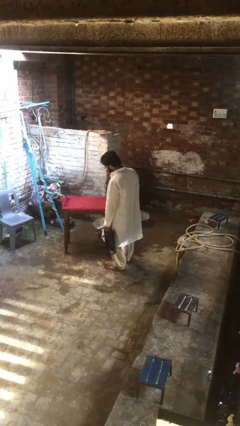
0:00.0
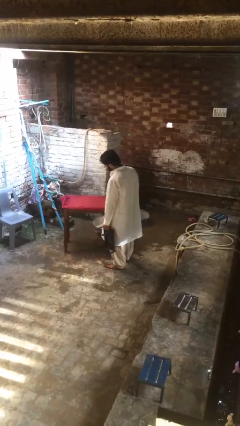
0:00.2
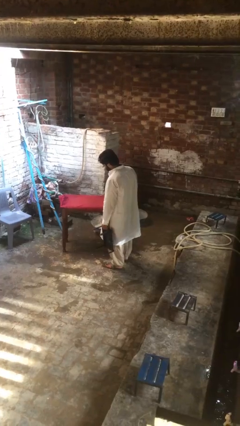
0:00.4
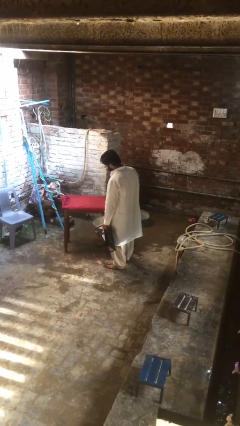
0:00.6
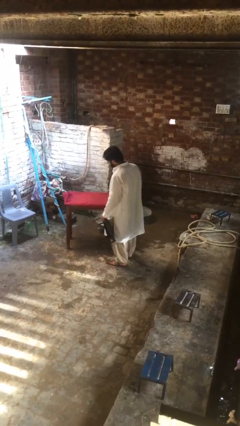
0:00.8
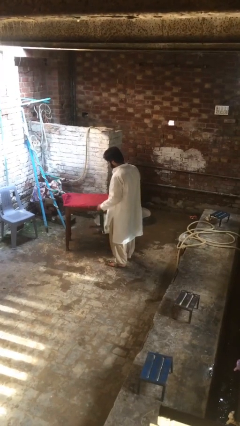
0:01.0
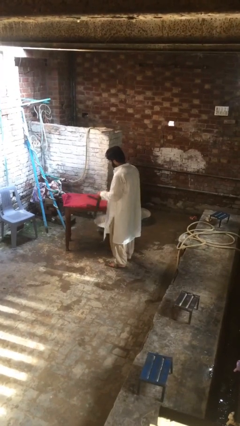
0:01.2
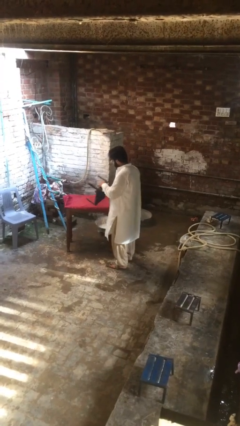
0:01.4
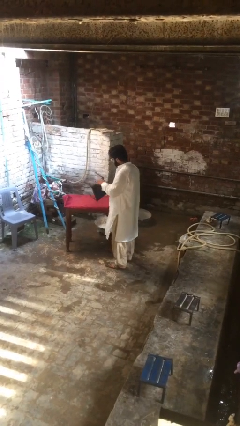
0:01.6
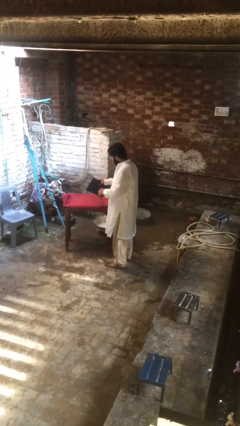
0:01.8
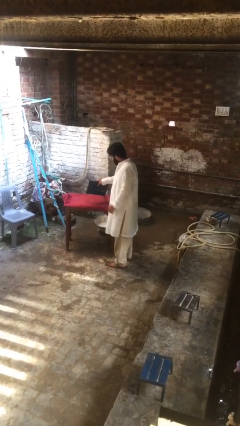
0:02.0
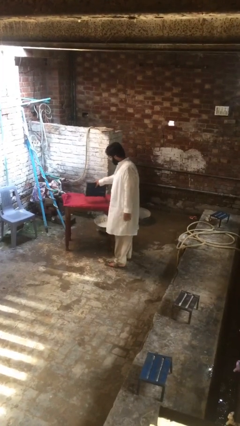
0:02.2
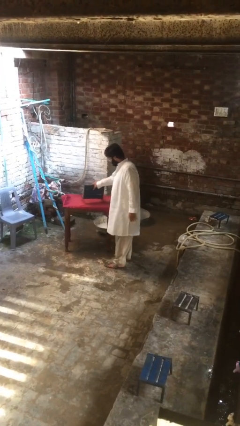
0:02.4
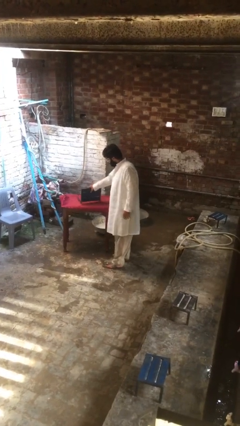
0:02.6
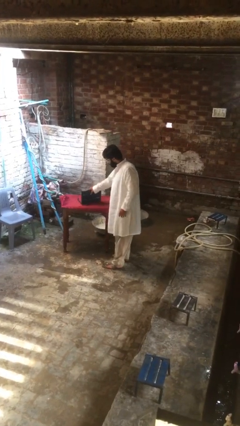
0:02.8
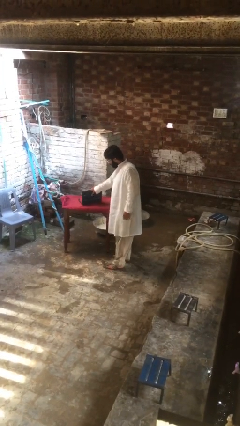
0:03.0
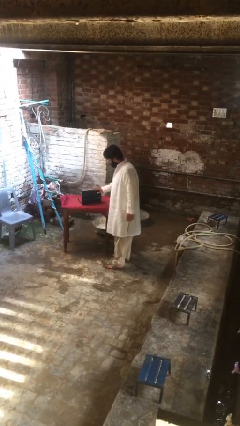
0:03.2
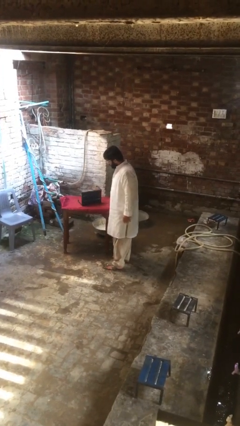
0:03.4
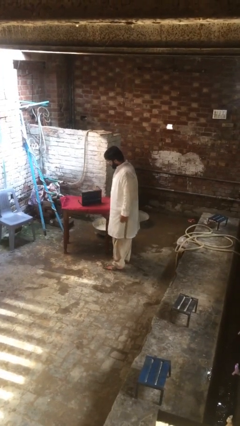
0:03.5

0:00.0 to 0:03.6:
person puts down object on table

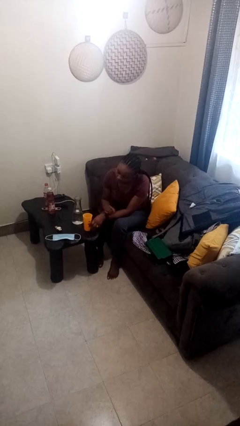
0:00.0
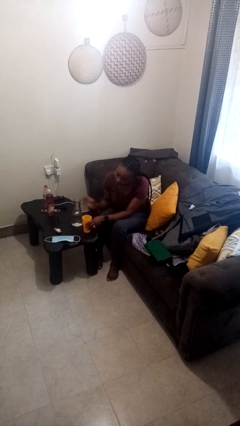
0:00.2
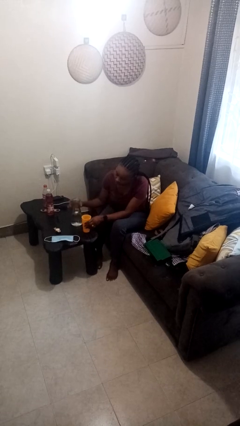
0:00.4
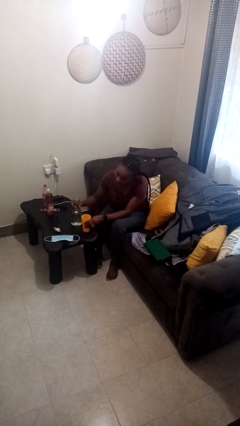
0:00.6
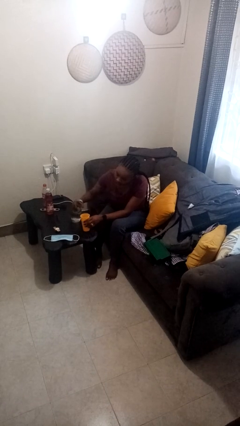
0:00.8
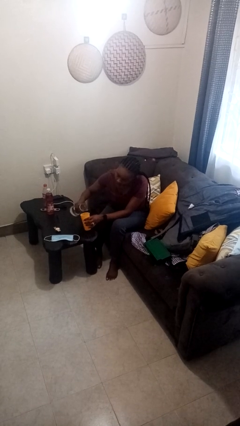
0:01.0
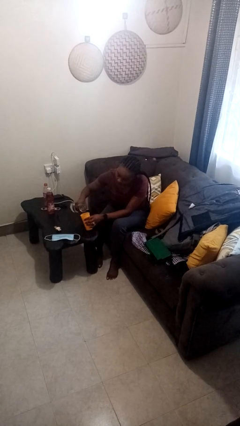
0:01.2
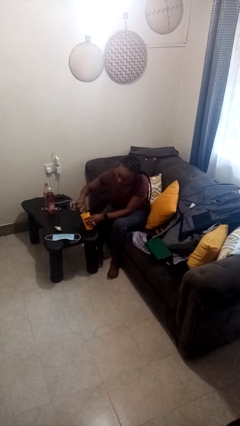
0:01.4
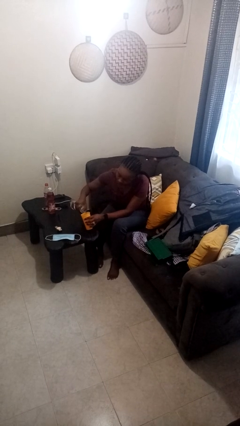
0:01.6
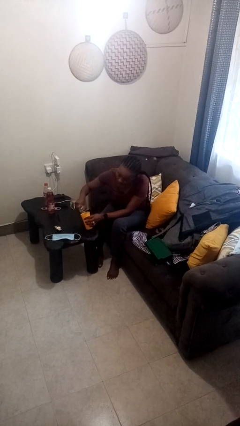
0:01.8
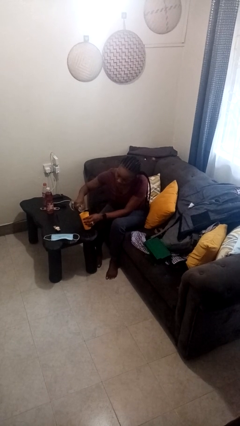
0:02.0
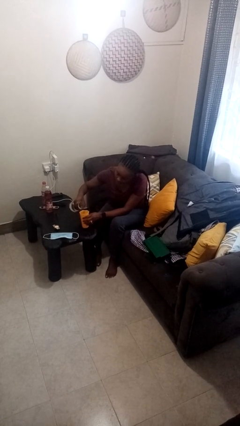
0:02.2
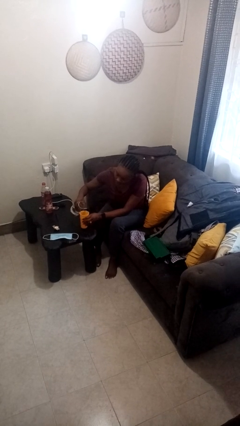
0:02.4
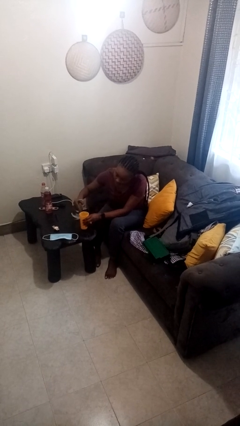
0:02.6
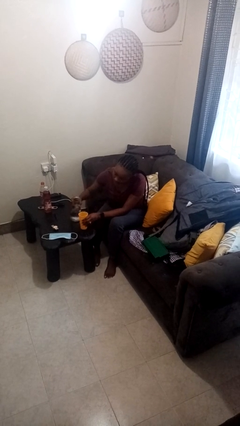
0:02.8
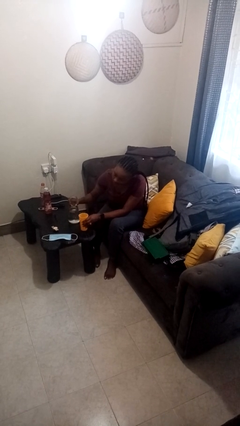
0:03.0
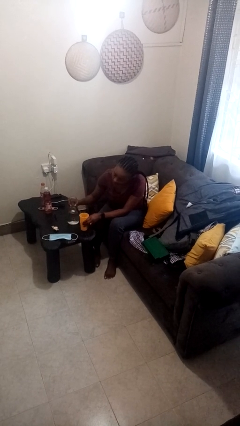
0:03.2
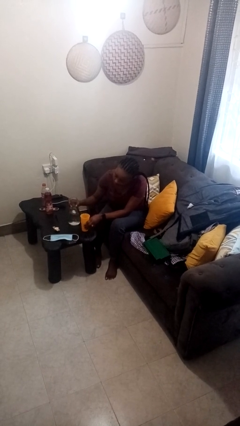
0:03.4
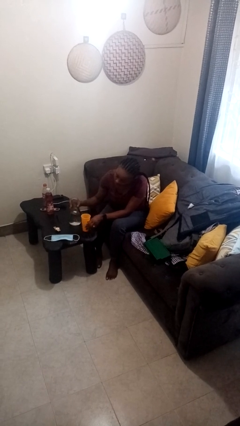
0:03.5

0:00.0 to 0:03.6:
person pours liquid into cup

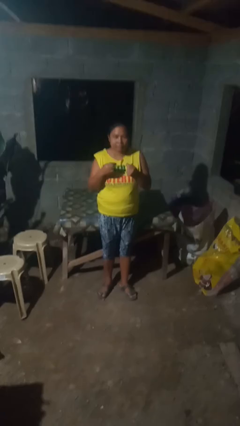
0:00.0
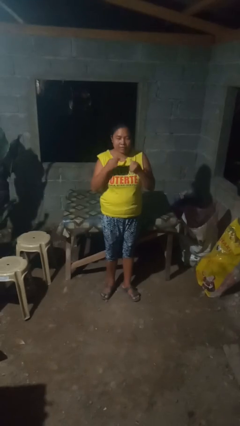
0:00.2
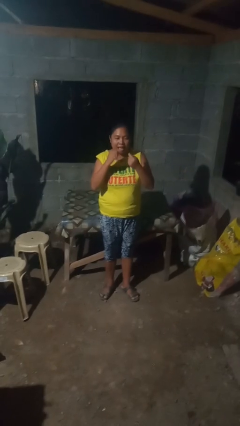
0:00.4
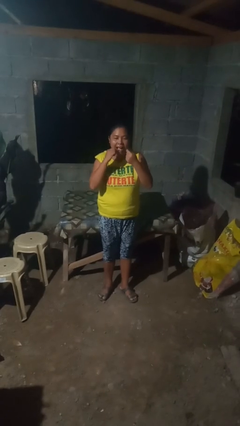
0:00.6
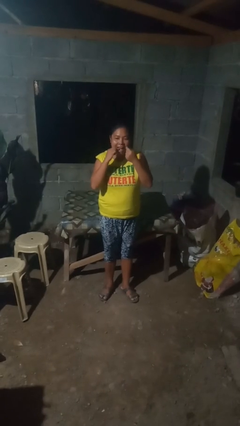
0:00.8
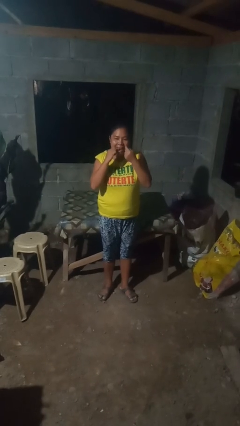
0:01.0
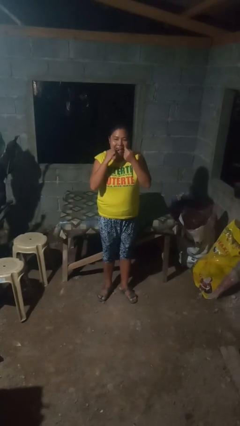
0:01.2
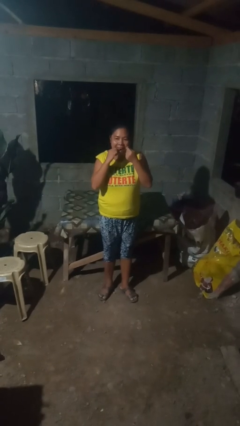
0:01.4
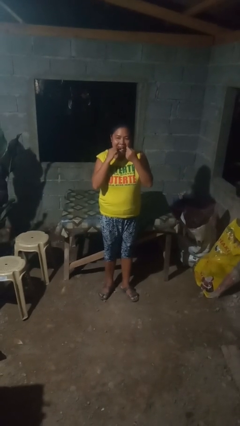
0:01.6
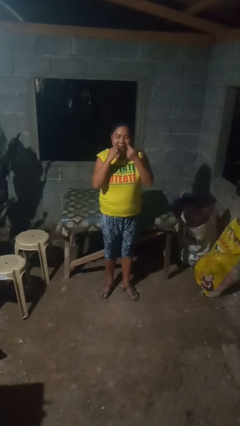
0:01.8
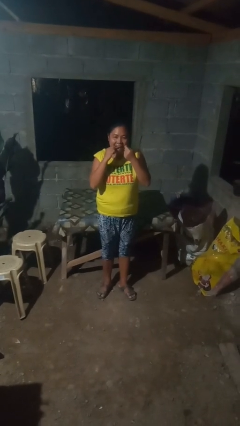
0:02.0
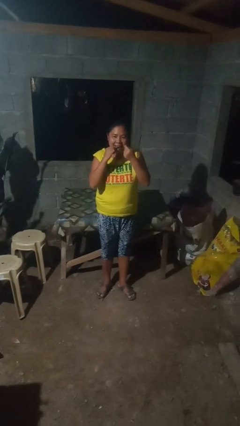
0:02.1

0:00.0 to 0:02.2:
person flosses

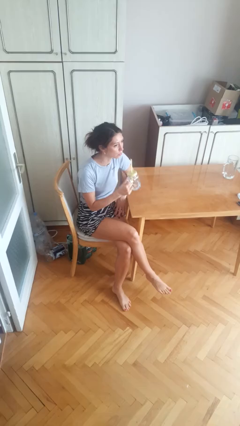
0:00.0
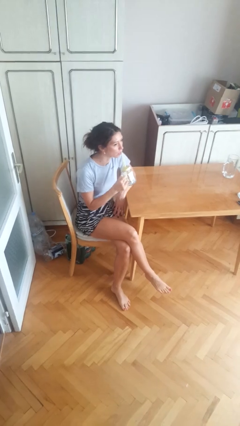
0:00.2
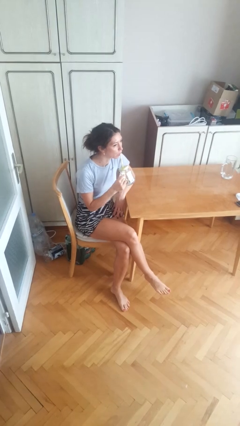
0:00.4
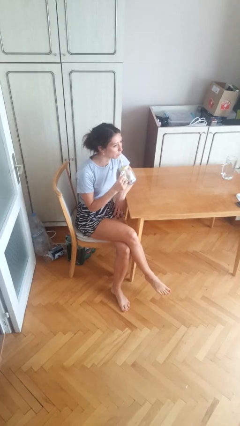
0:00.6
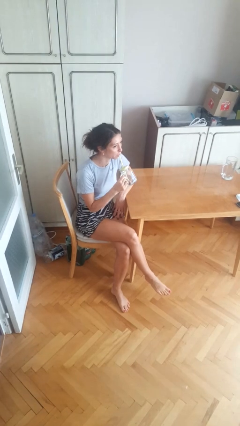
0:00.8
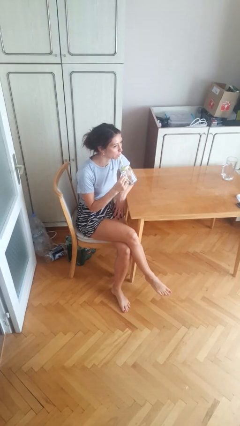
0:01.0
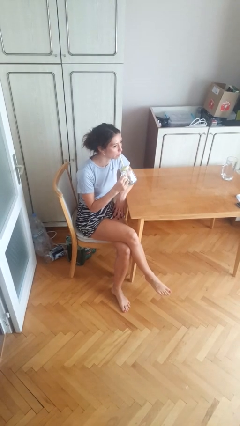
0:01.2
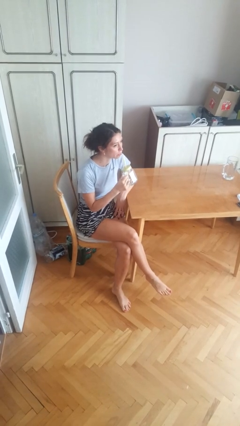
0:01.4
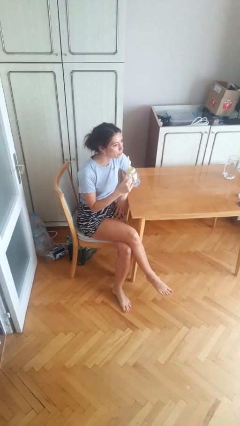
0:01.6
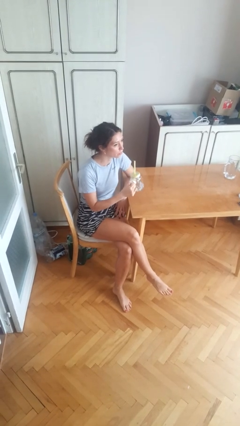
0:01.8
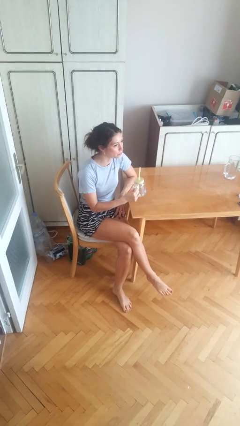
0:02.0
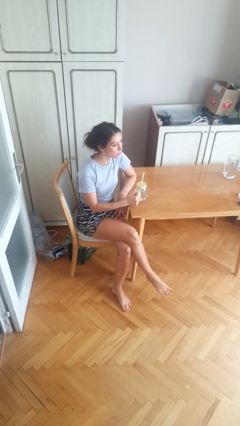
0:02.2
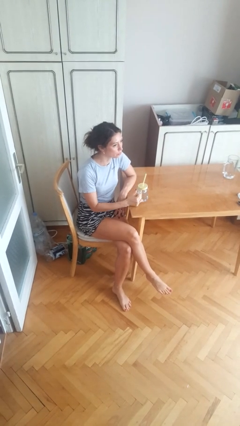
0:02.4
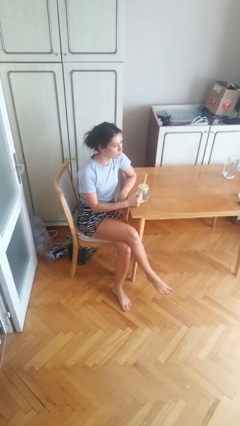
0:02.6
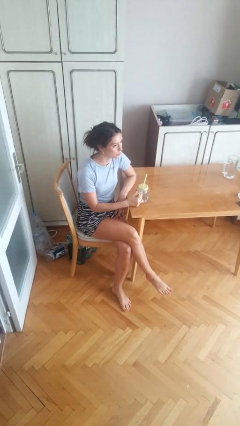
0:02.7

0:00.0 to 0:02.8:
person drinks from straw

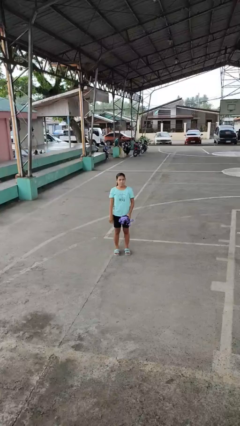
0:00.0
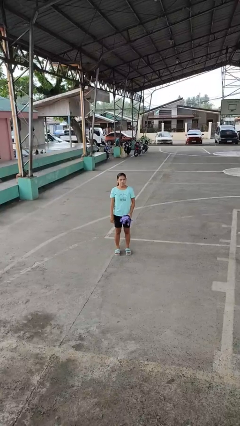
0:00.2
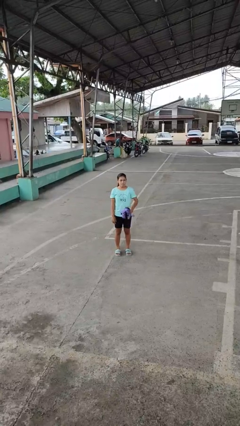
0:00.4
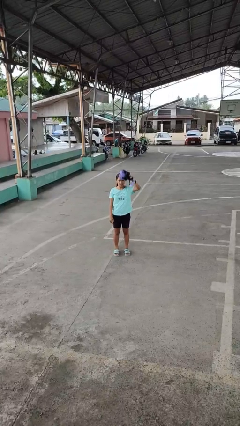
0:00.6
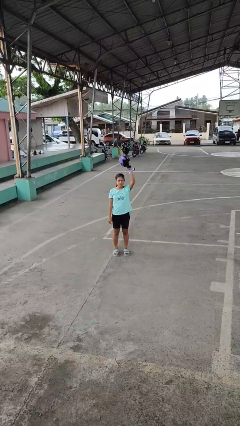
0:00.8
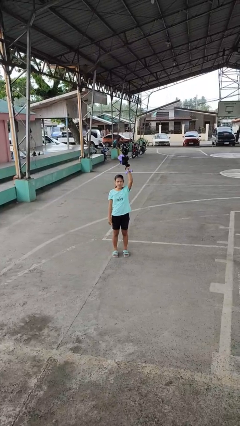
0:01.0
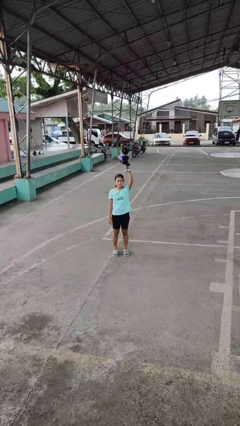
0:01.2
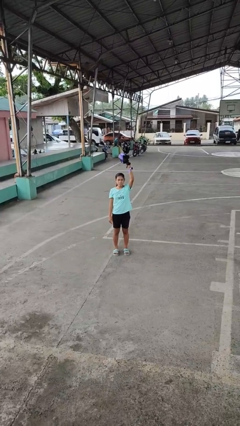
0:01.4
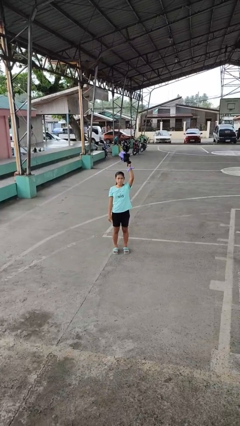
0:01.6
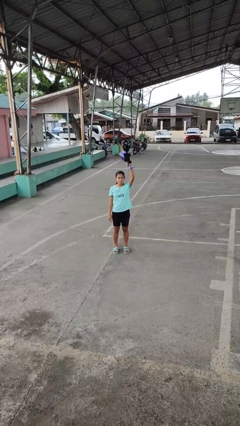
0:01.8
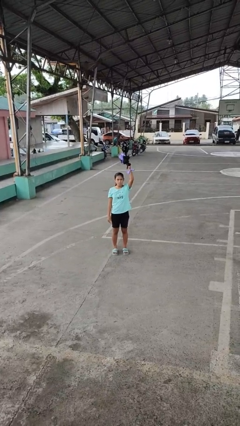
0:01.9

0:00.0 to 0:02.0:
person holds object above head

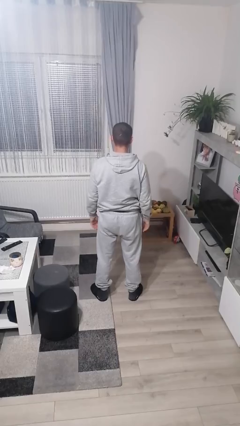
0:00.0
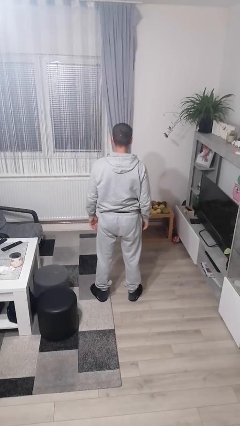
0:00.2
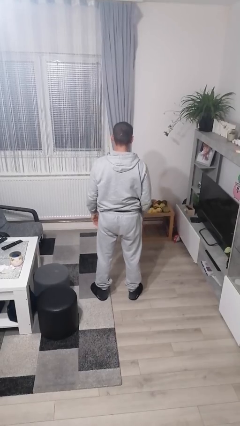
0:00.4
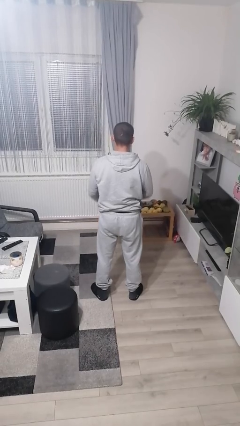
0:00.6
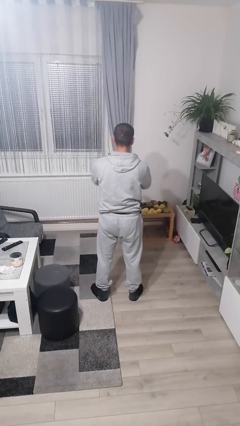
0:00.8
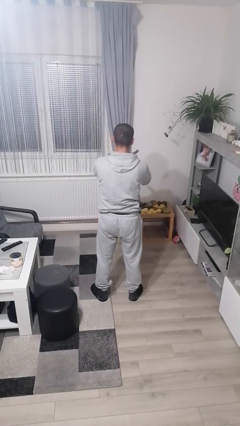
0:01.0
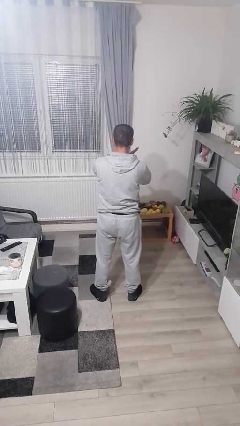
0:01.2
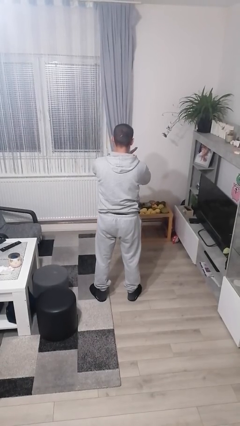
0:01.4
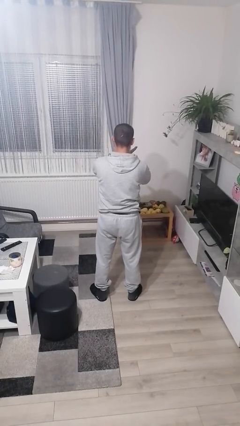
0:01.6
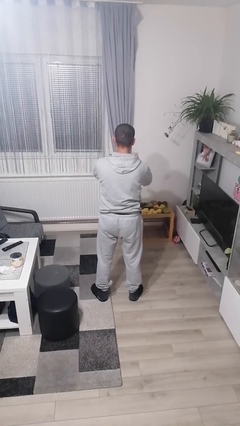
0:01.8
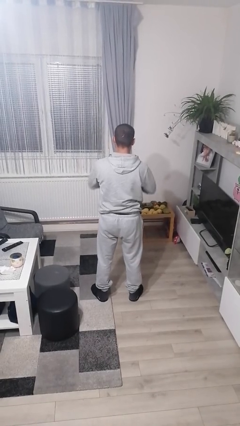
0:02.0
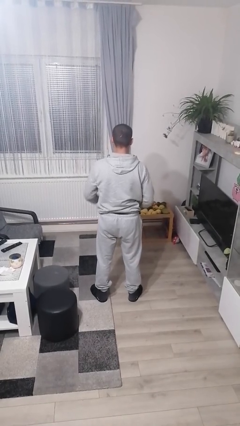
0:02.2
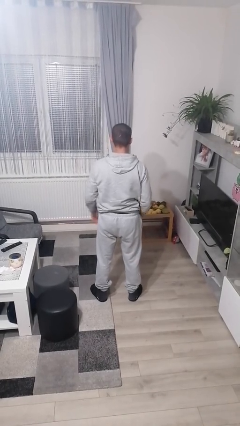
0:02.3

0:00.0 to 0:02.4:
person gestures arms x

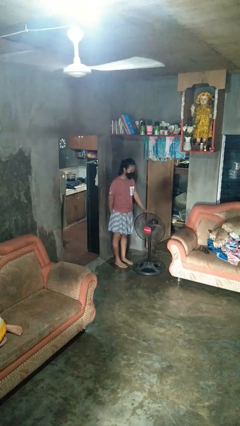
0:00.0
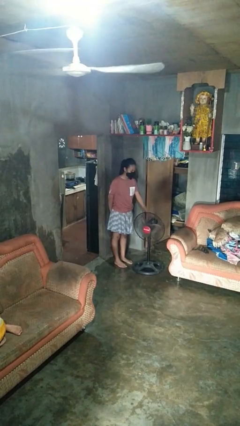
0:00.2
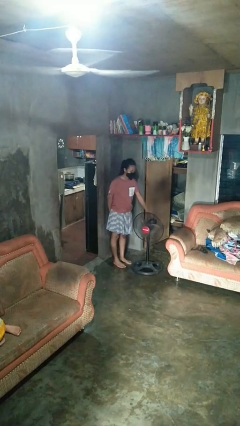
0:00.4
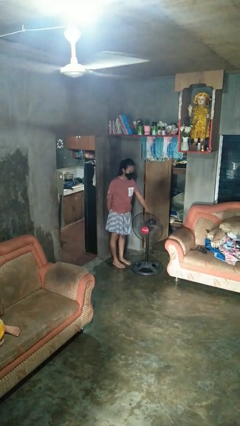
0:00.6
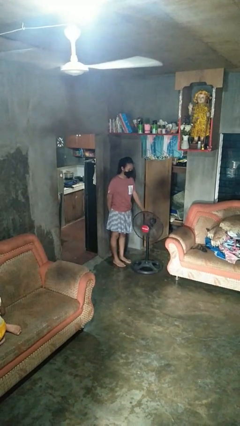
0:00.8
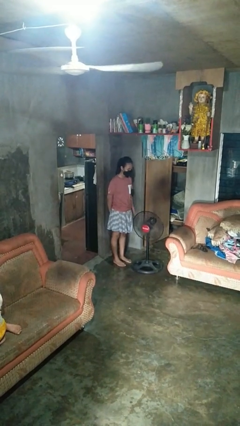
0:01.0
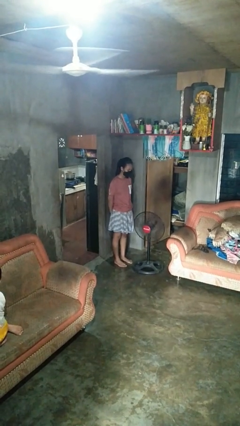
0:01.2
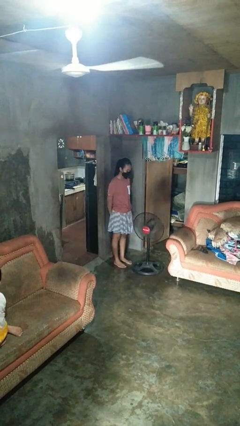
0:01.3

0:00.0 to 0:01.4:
person turns on fan
